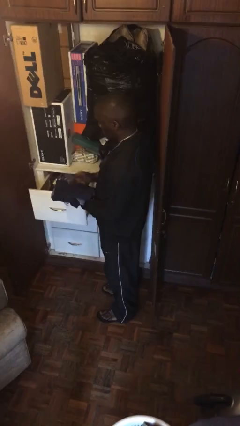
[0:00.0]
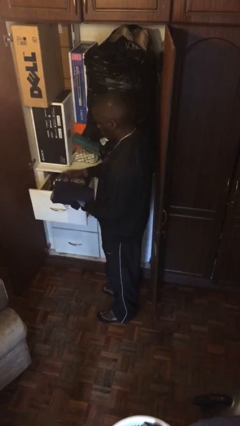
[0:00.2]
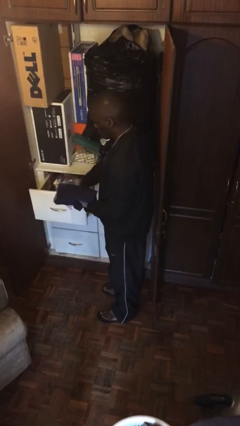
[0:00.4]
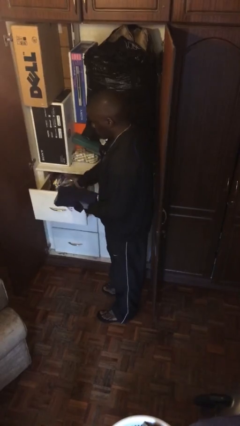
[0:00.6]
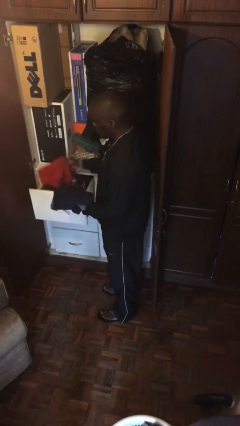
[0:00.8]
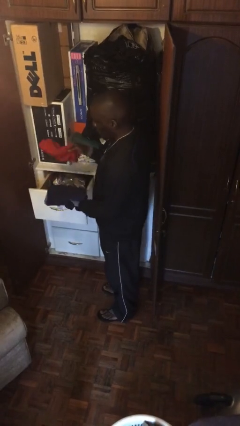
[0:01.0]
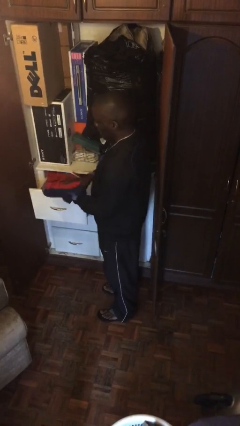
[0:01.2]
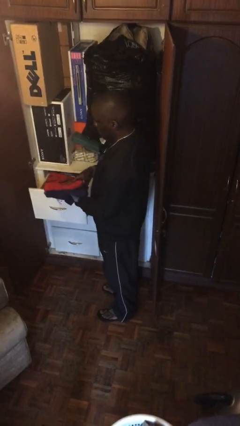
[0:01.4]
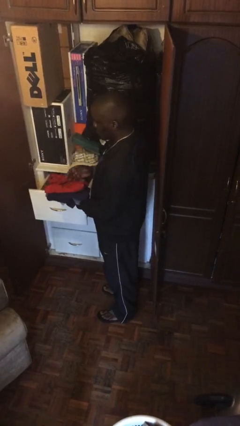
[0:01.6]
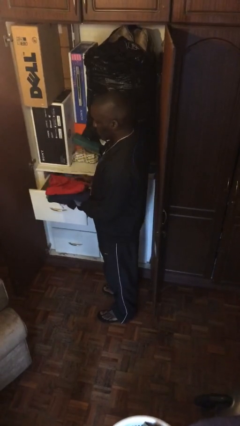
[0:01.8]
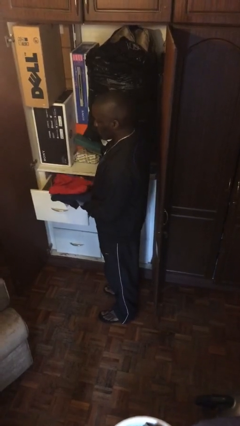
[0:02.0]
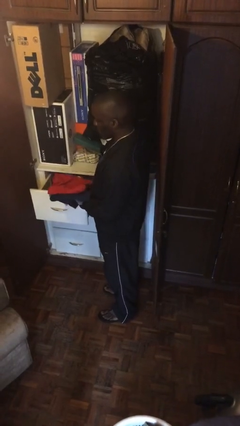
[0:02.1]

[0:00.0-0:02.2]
person takes clothes from dresser

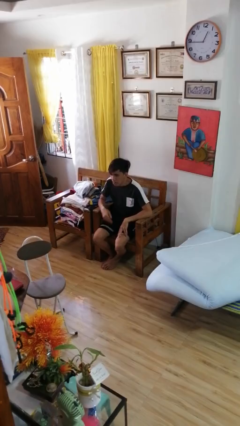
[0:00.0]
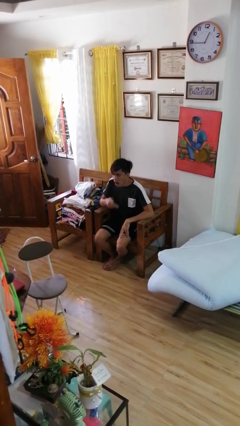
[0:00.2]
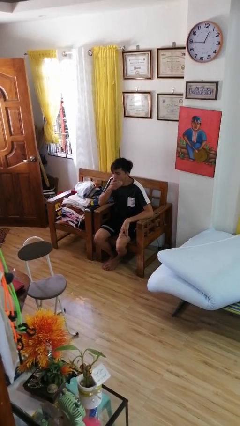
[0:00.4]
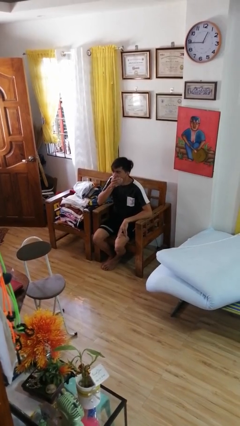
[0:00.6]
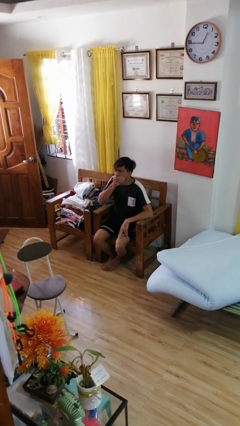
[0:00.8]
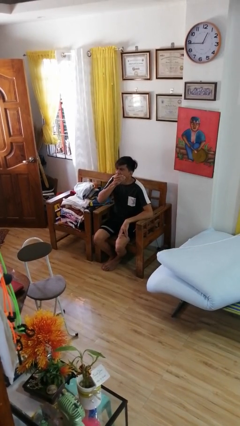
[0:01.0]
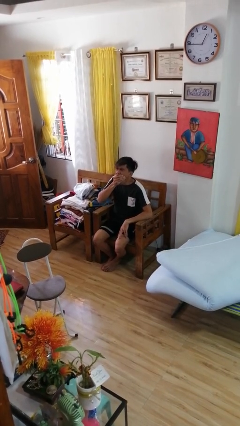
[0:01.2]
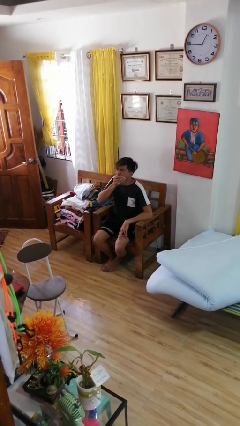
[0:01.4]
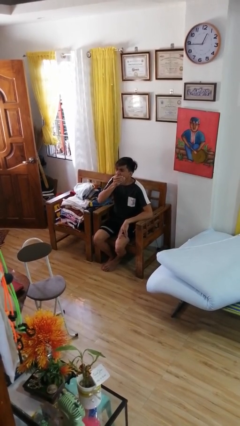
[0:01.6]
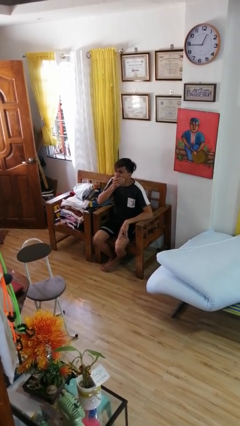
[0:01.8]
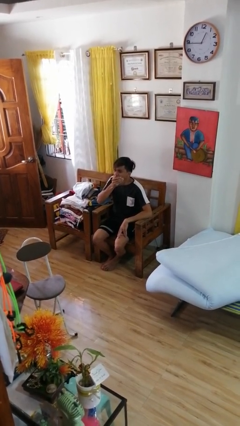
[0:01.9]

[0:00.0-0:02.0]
person yawns

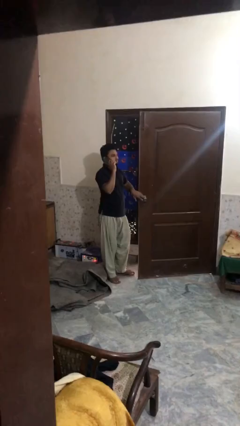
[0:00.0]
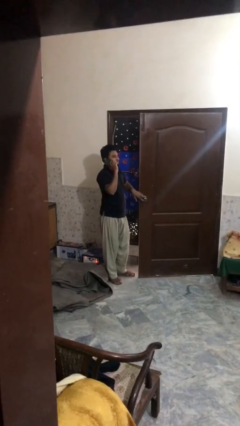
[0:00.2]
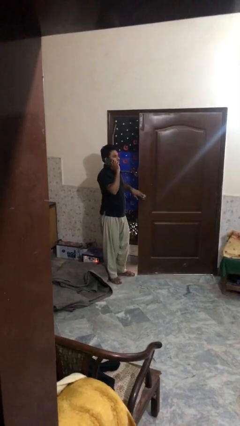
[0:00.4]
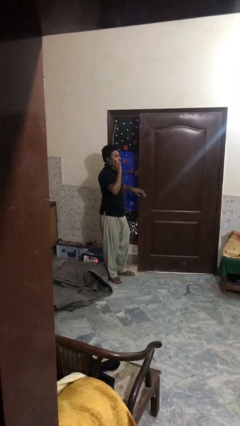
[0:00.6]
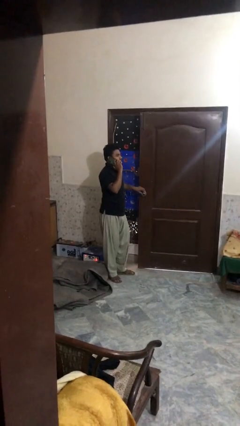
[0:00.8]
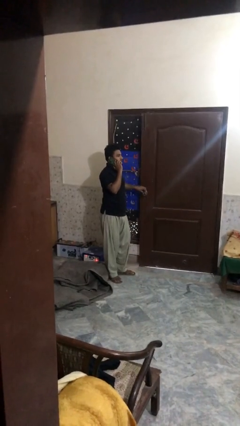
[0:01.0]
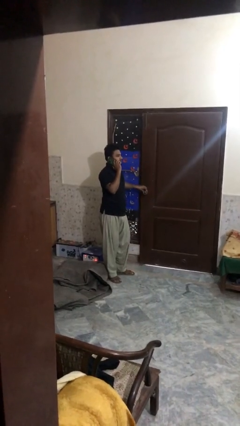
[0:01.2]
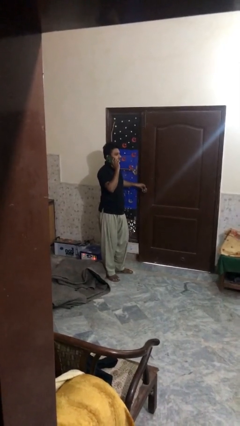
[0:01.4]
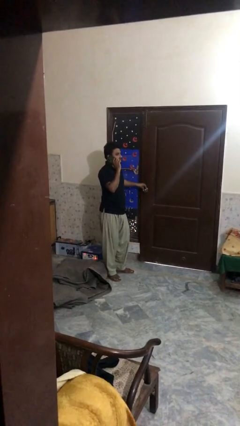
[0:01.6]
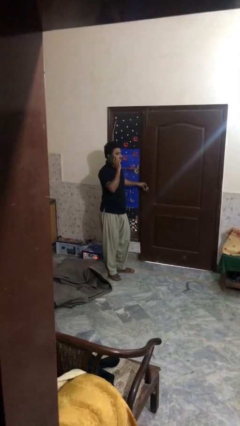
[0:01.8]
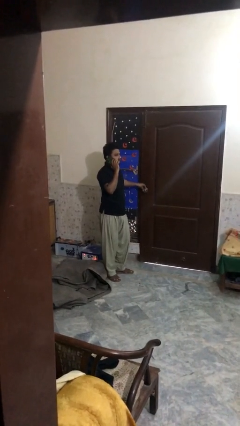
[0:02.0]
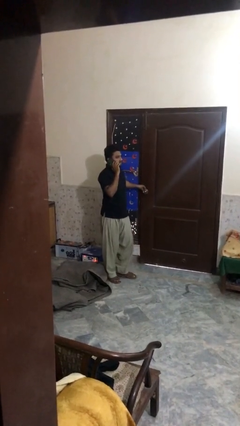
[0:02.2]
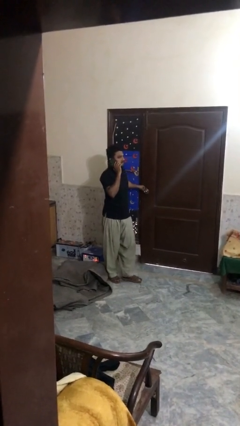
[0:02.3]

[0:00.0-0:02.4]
person closes facility door

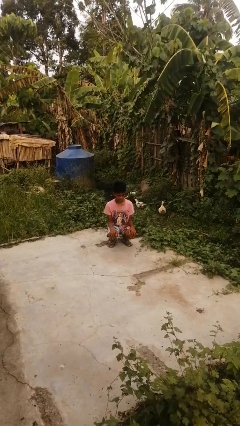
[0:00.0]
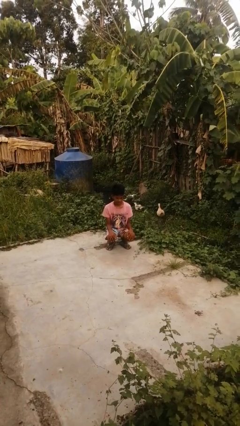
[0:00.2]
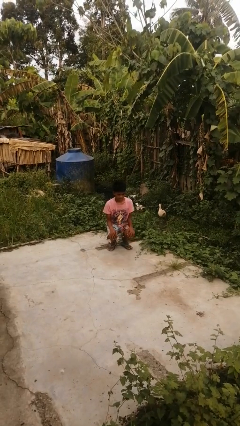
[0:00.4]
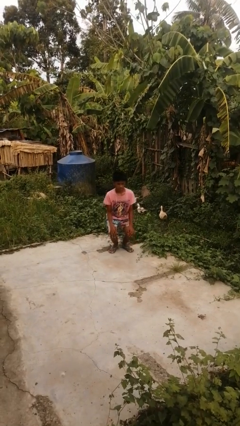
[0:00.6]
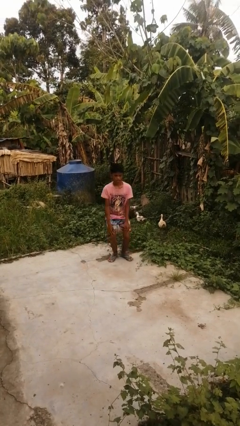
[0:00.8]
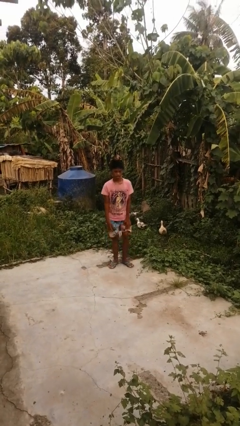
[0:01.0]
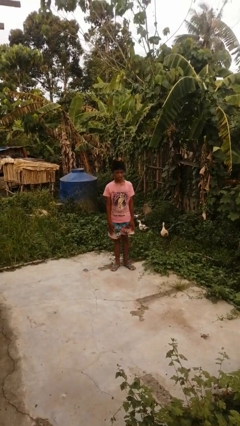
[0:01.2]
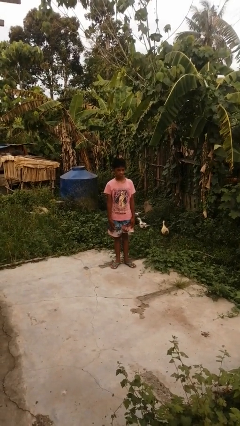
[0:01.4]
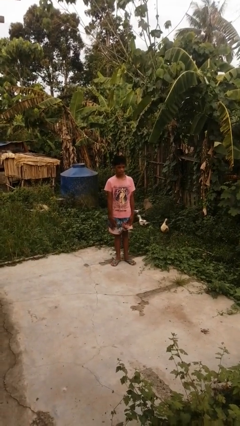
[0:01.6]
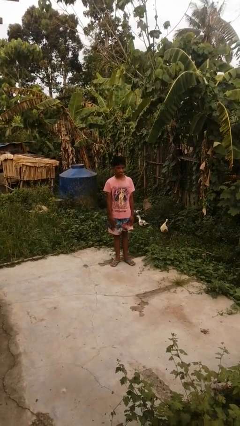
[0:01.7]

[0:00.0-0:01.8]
person stands up

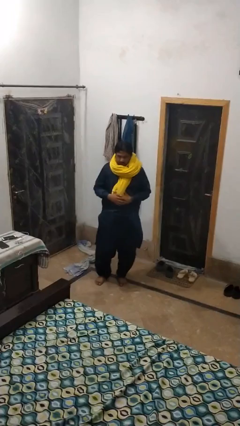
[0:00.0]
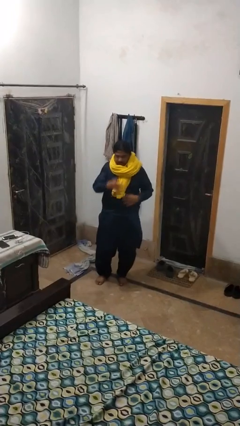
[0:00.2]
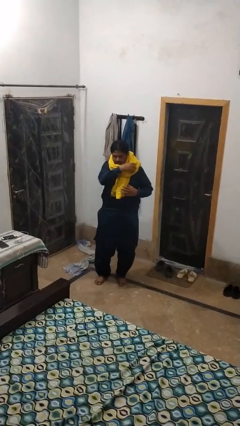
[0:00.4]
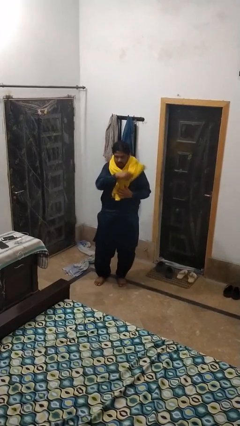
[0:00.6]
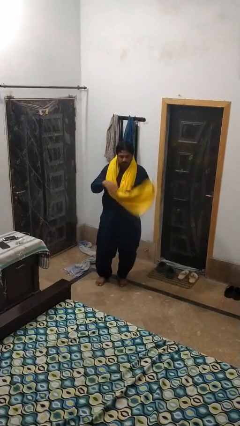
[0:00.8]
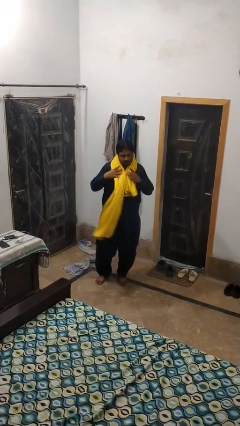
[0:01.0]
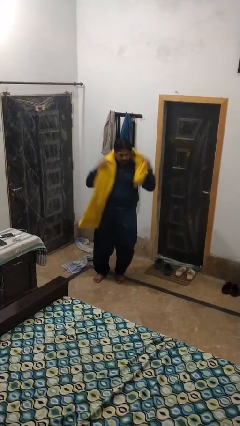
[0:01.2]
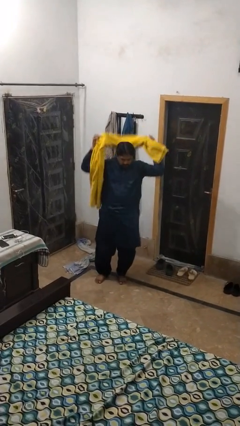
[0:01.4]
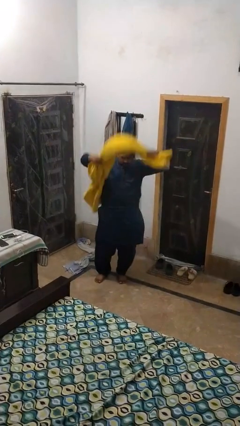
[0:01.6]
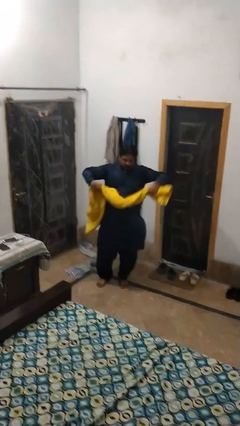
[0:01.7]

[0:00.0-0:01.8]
person takes off scarf

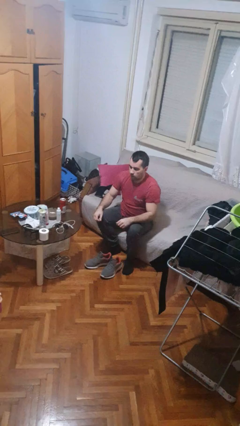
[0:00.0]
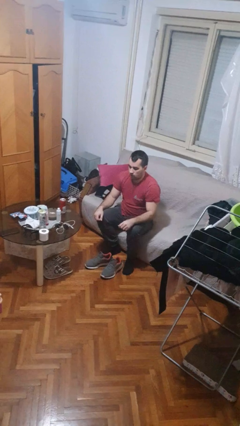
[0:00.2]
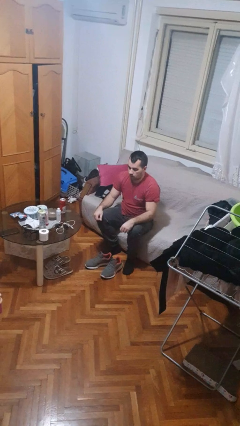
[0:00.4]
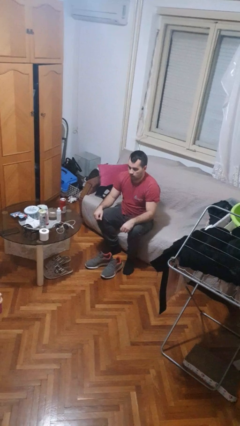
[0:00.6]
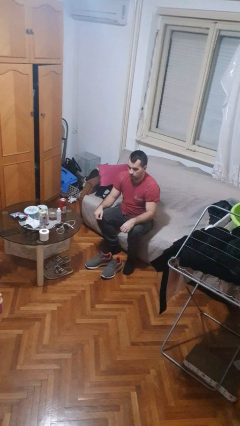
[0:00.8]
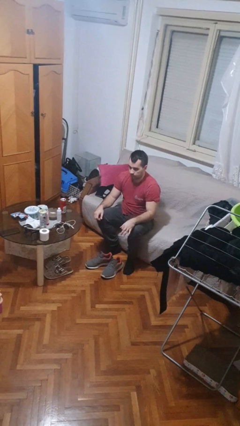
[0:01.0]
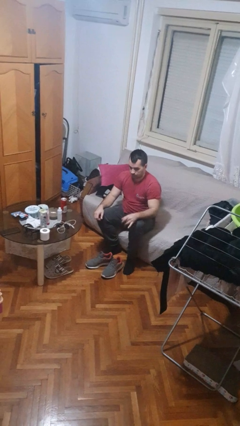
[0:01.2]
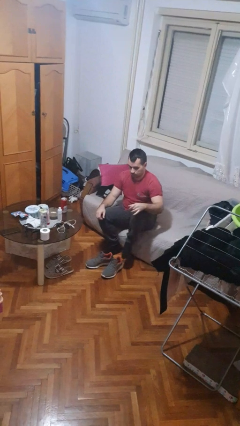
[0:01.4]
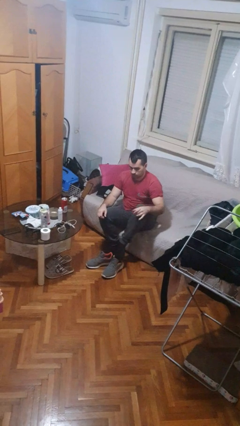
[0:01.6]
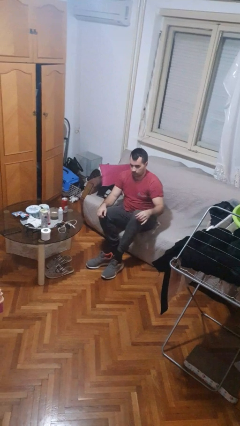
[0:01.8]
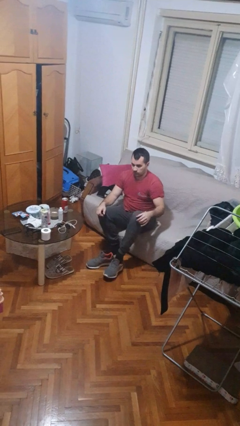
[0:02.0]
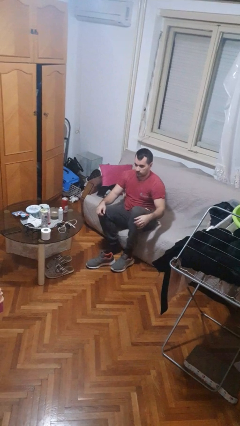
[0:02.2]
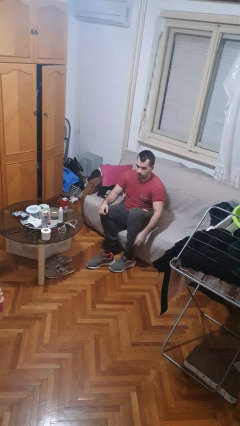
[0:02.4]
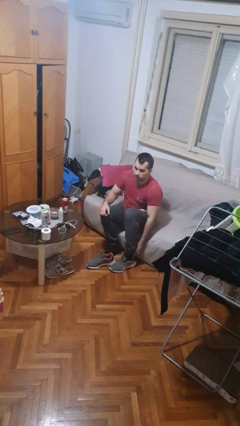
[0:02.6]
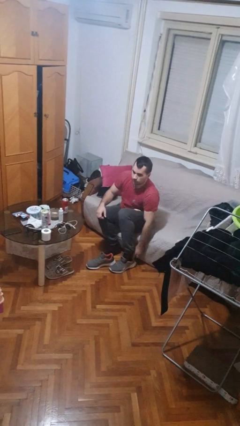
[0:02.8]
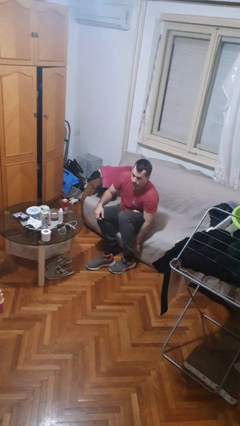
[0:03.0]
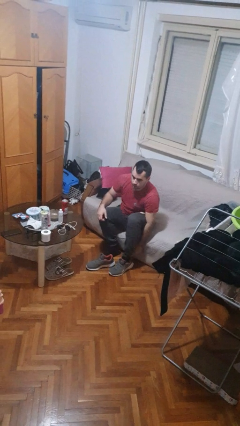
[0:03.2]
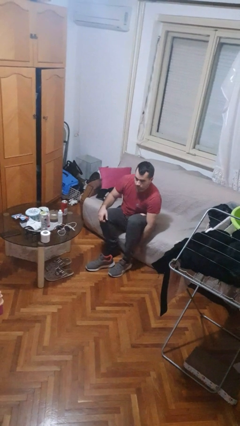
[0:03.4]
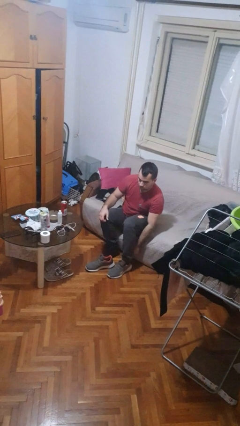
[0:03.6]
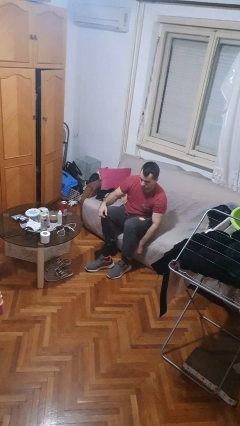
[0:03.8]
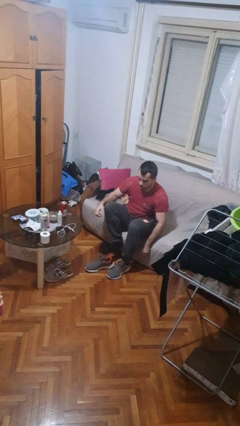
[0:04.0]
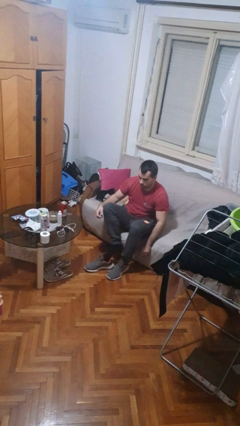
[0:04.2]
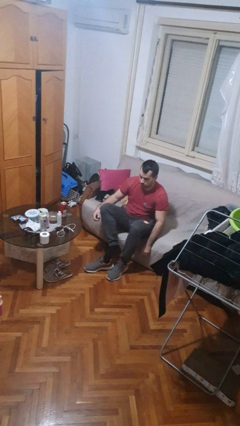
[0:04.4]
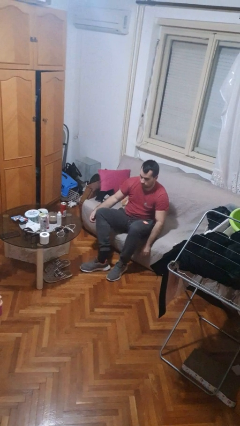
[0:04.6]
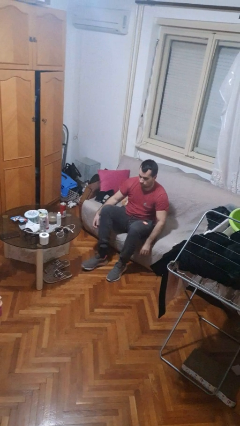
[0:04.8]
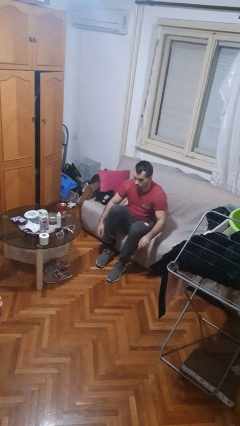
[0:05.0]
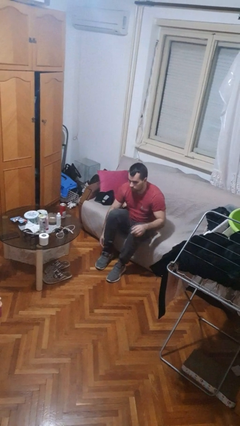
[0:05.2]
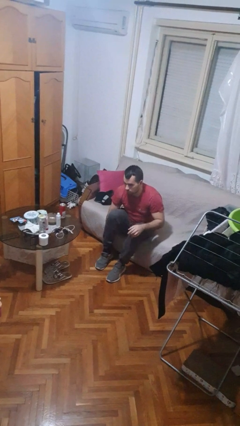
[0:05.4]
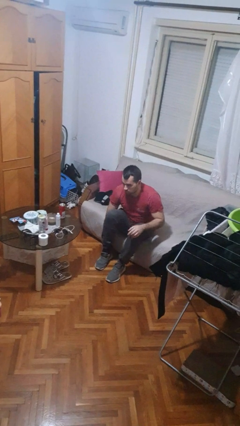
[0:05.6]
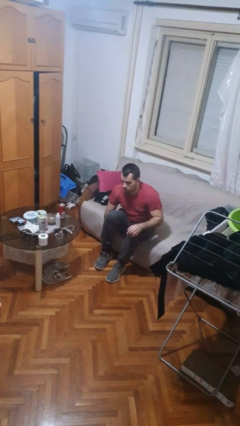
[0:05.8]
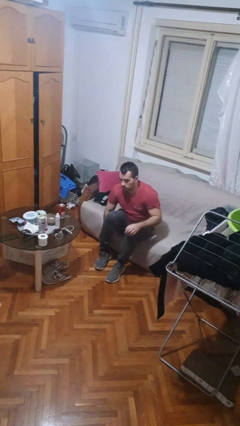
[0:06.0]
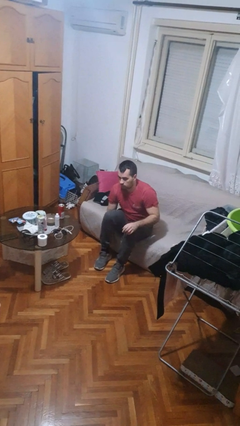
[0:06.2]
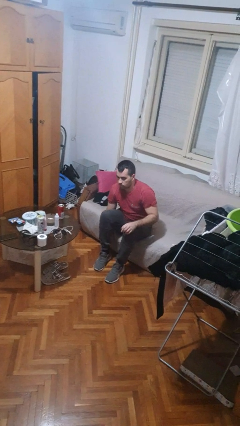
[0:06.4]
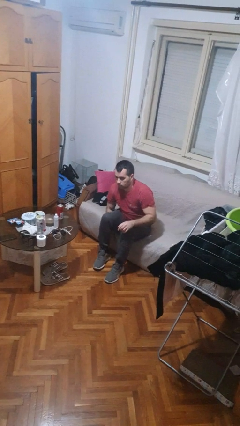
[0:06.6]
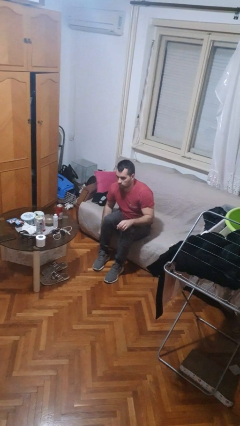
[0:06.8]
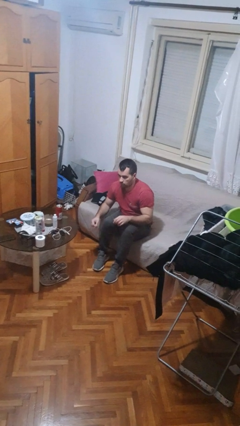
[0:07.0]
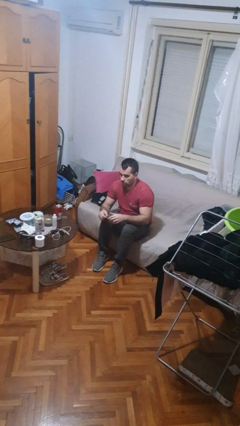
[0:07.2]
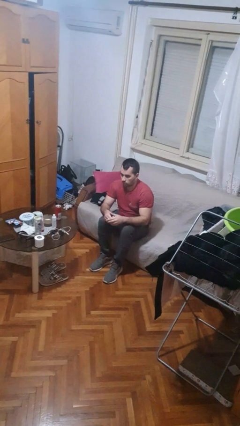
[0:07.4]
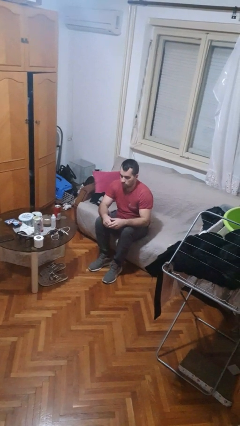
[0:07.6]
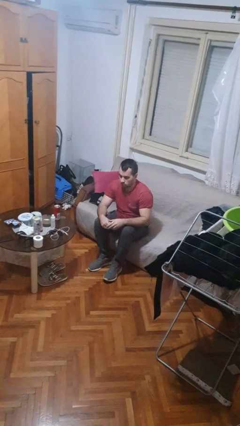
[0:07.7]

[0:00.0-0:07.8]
person puts on shoes
